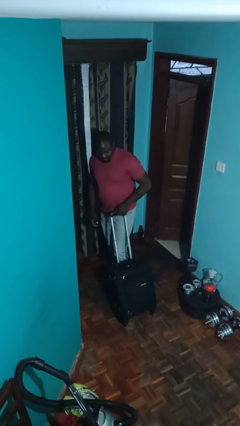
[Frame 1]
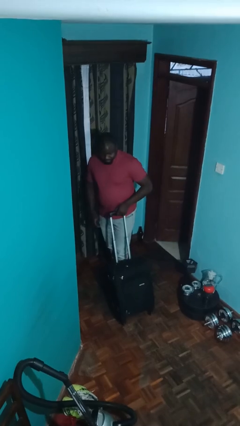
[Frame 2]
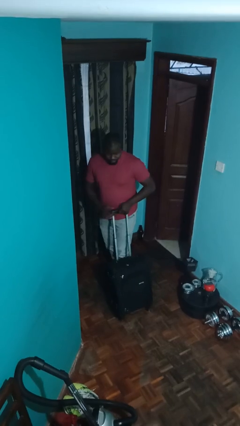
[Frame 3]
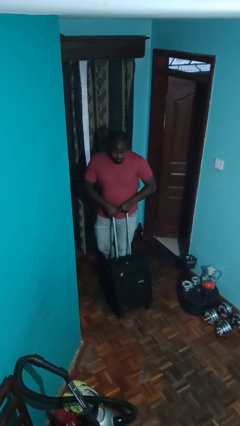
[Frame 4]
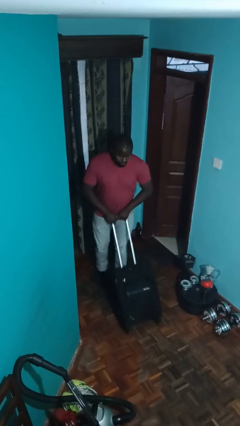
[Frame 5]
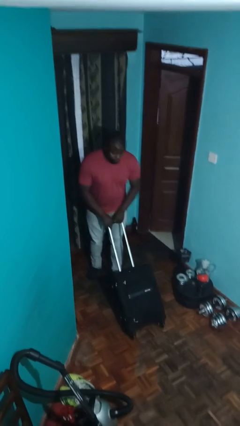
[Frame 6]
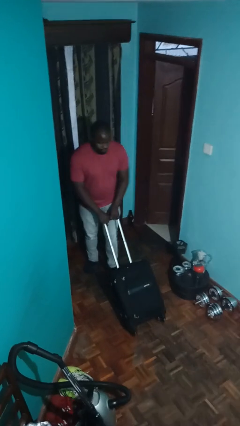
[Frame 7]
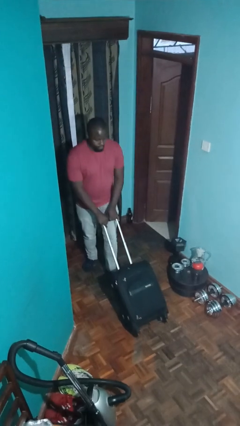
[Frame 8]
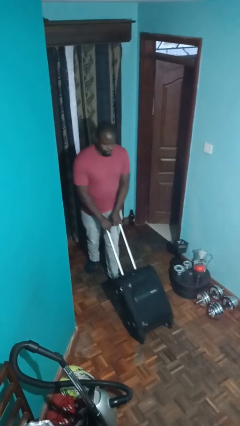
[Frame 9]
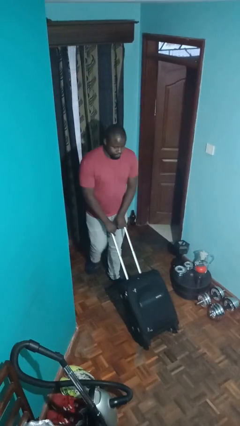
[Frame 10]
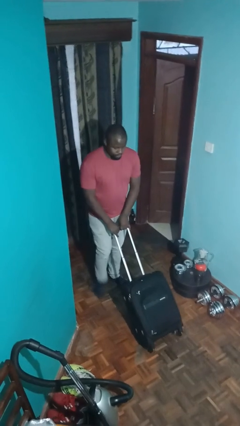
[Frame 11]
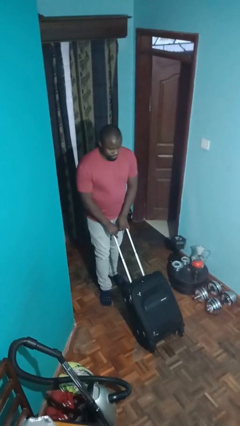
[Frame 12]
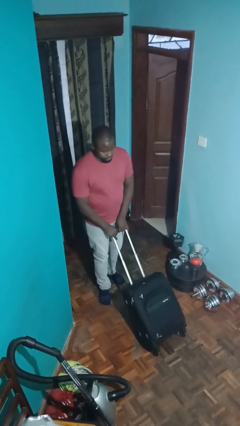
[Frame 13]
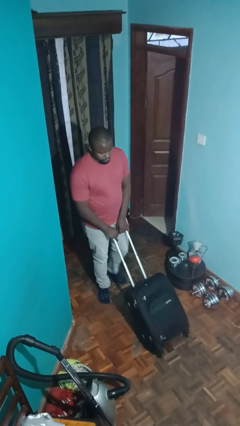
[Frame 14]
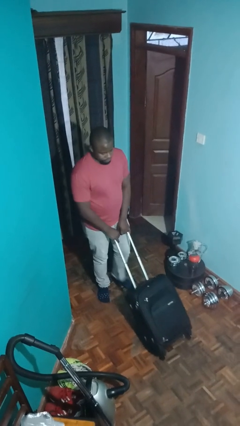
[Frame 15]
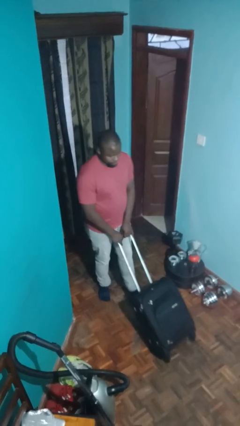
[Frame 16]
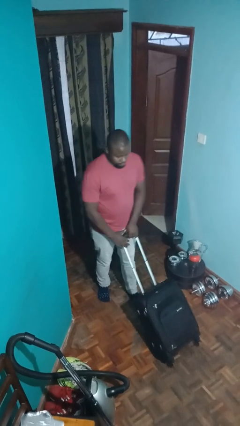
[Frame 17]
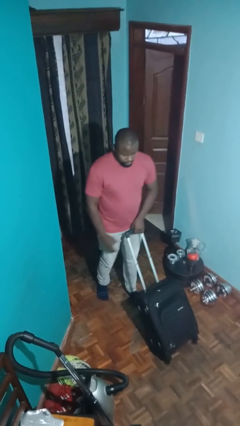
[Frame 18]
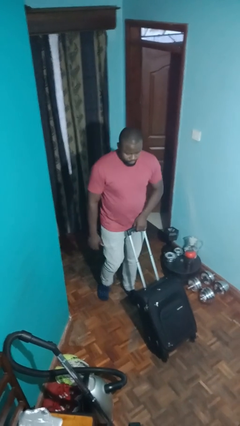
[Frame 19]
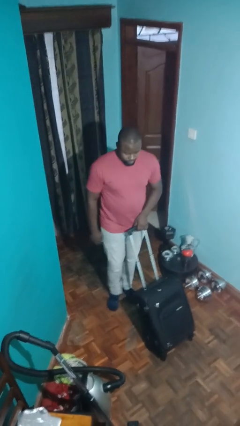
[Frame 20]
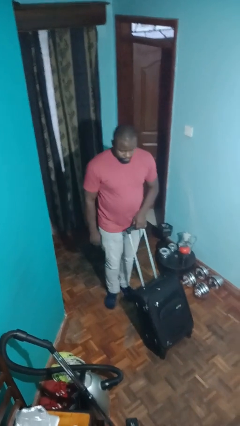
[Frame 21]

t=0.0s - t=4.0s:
person pushes wheeled cart

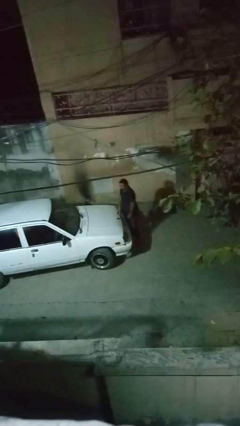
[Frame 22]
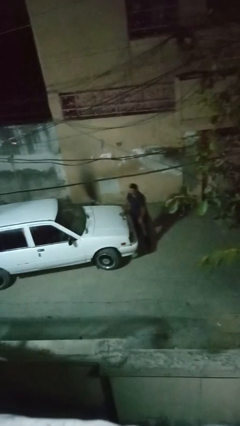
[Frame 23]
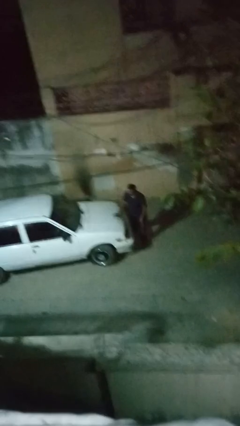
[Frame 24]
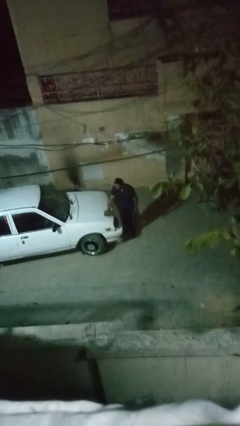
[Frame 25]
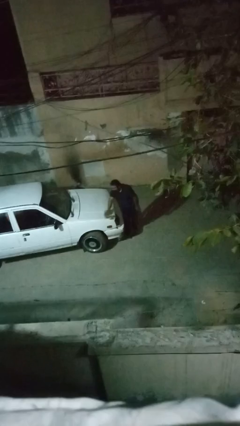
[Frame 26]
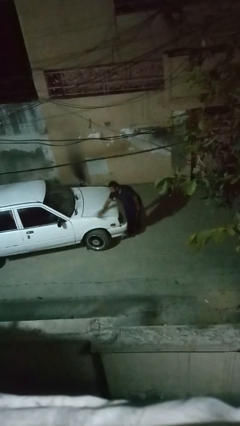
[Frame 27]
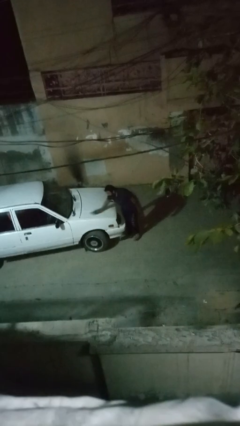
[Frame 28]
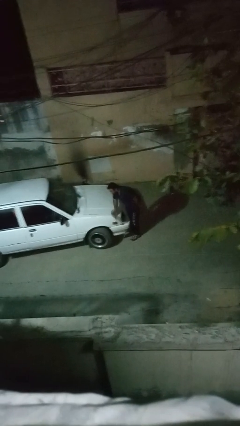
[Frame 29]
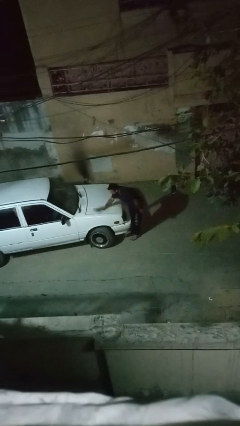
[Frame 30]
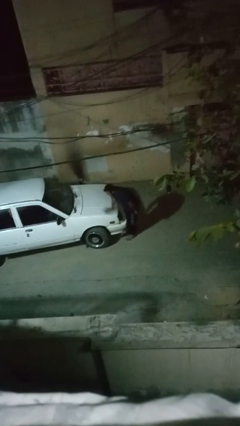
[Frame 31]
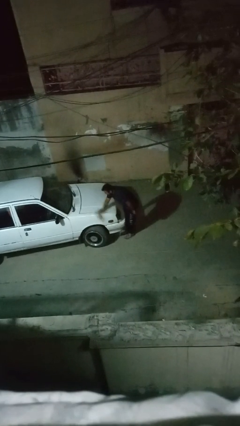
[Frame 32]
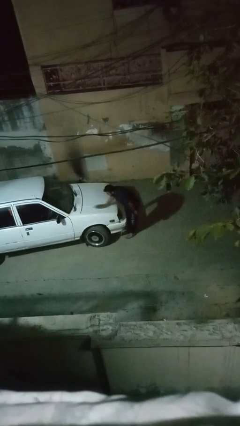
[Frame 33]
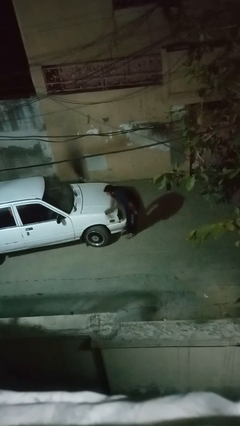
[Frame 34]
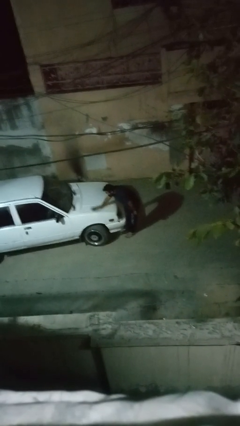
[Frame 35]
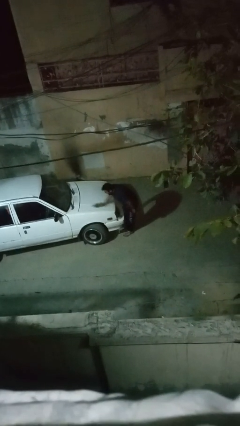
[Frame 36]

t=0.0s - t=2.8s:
person polishes car with rag

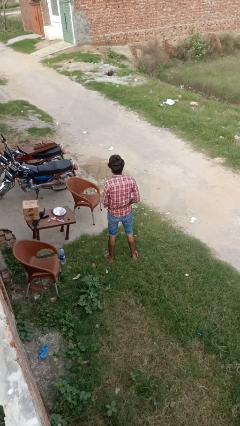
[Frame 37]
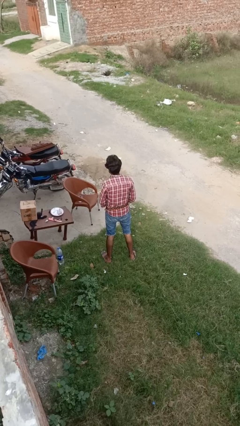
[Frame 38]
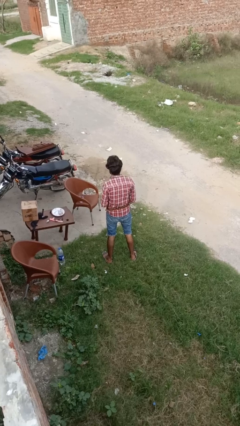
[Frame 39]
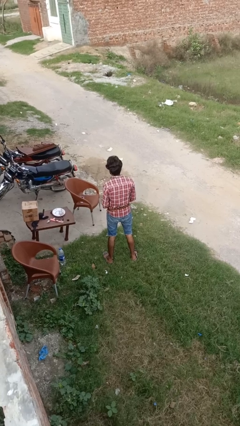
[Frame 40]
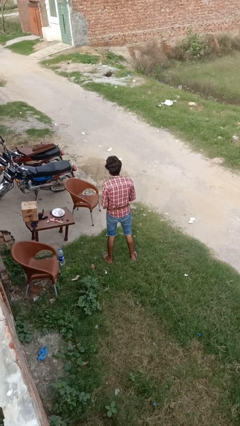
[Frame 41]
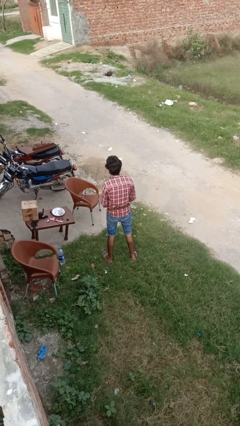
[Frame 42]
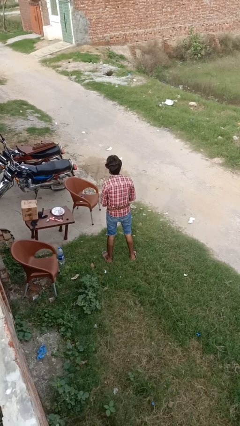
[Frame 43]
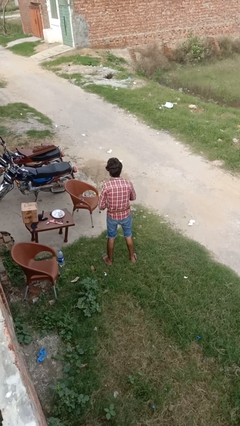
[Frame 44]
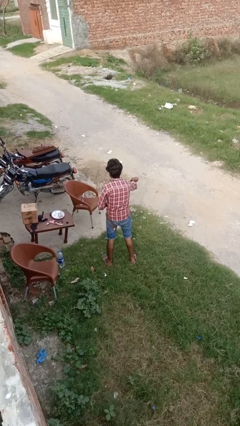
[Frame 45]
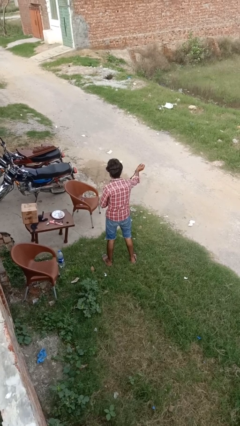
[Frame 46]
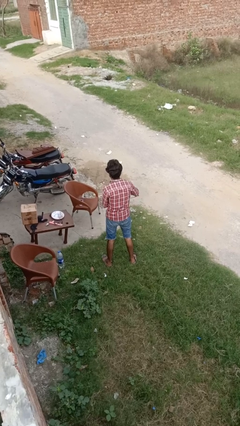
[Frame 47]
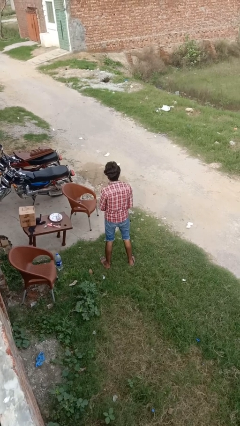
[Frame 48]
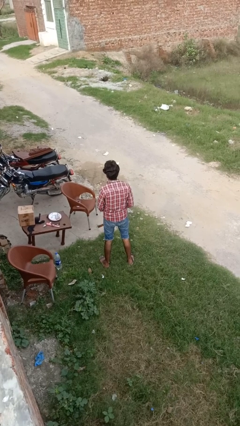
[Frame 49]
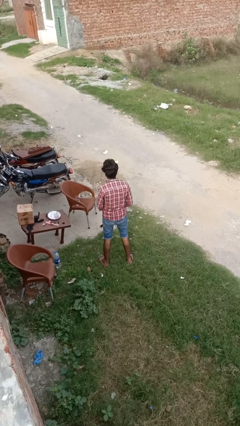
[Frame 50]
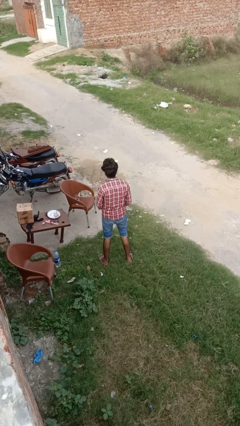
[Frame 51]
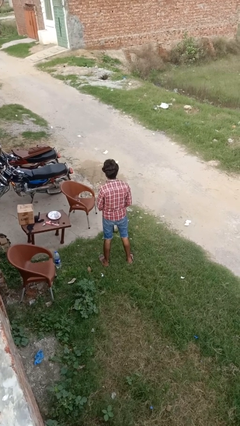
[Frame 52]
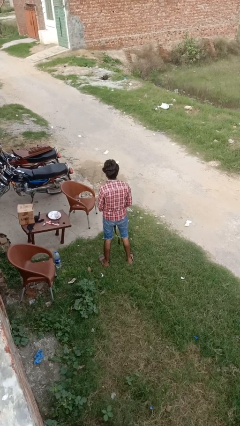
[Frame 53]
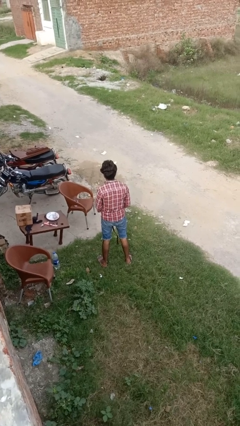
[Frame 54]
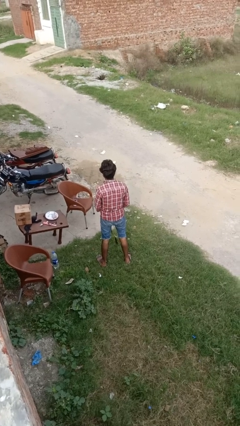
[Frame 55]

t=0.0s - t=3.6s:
person takes off belt

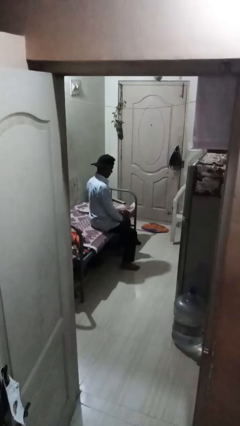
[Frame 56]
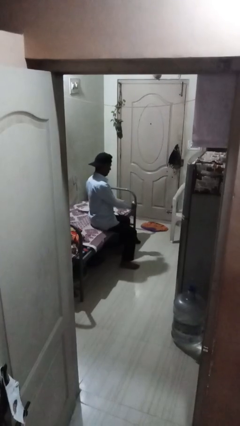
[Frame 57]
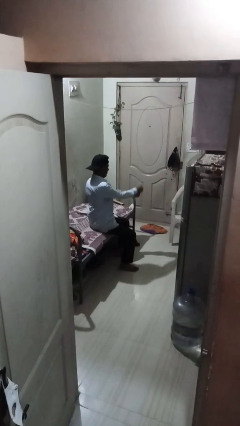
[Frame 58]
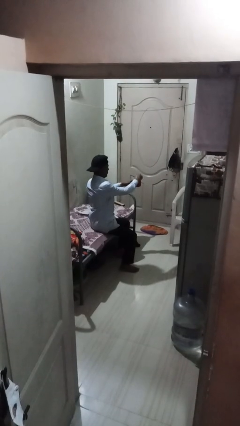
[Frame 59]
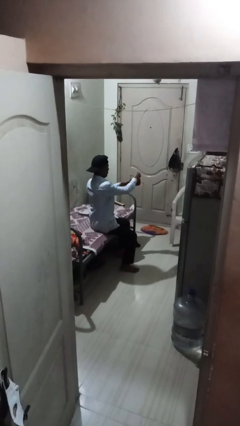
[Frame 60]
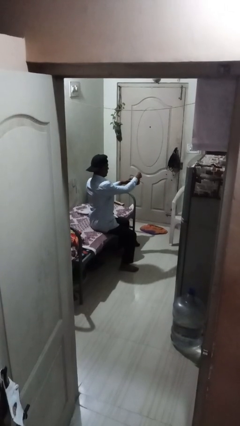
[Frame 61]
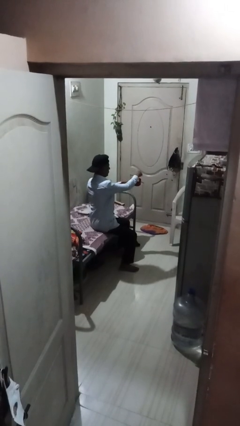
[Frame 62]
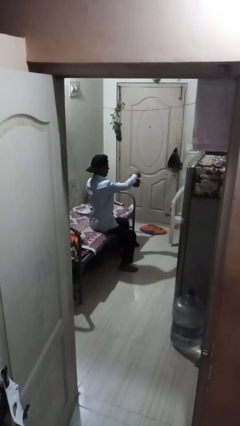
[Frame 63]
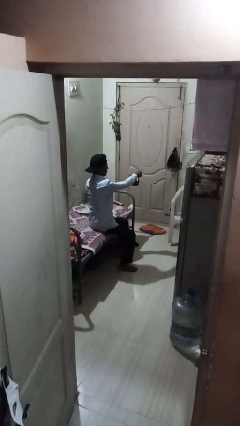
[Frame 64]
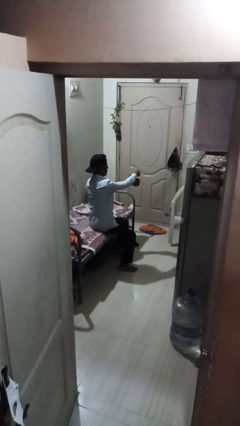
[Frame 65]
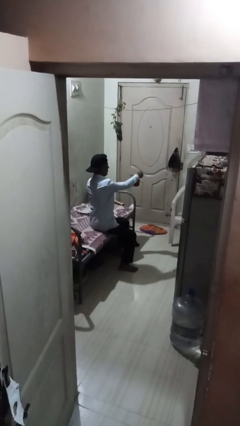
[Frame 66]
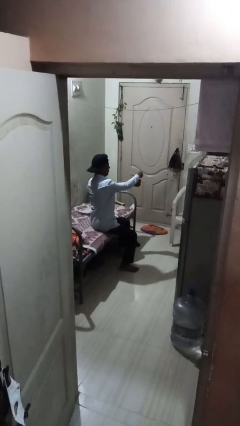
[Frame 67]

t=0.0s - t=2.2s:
person stirs mug

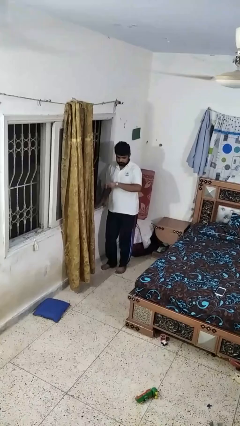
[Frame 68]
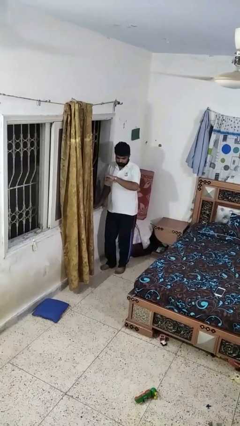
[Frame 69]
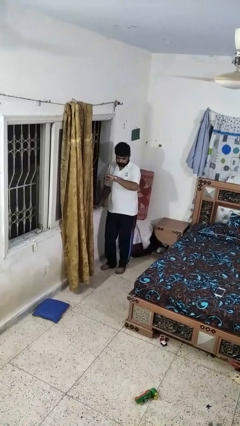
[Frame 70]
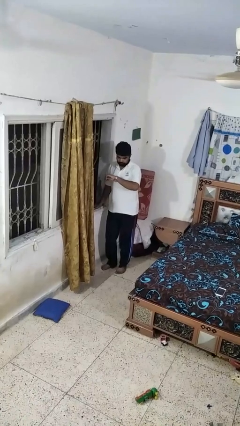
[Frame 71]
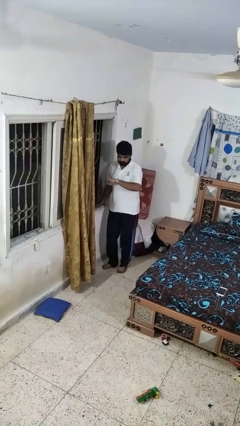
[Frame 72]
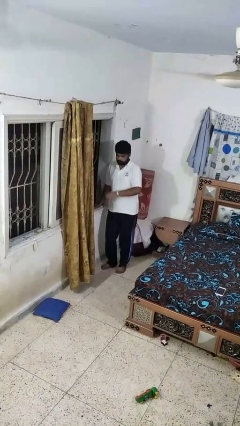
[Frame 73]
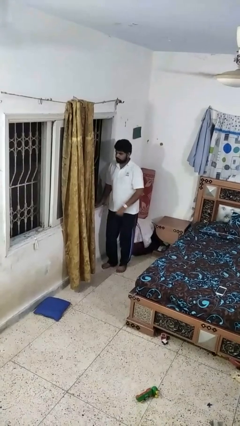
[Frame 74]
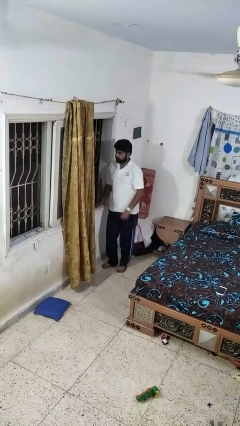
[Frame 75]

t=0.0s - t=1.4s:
person looks at wristwatch

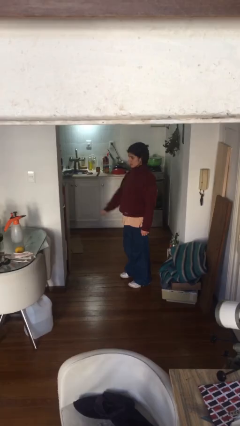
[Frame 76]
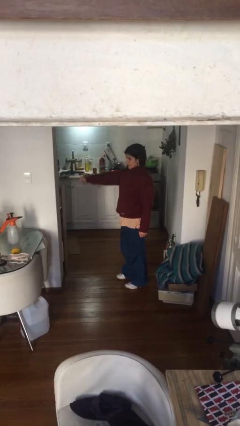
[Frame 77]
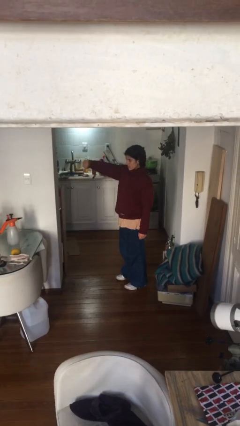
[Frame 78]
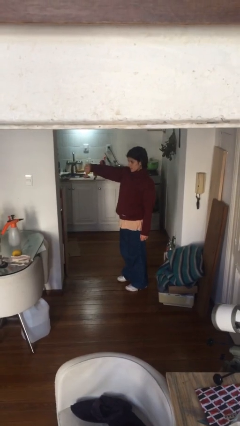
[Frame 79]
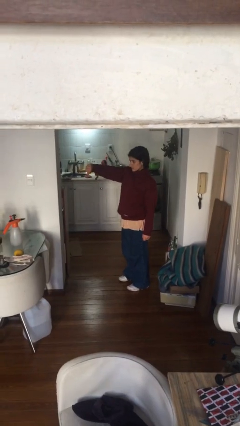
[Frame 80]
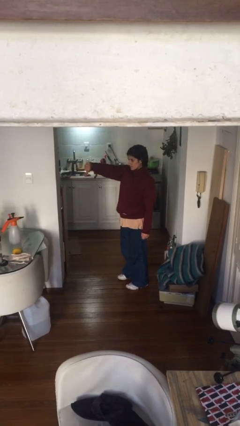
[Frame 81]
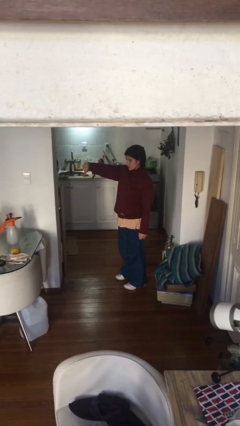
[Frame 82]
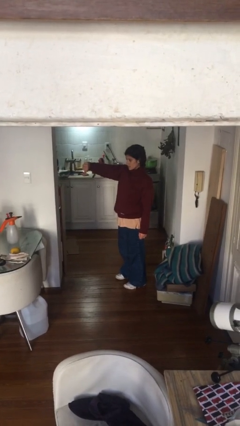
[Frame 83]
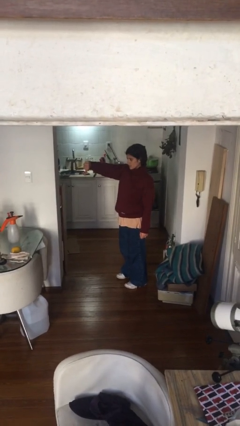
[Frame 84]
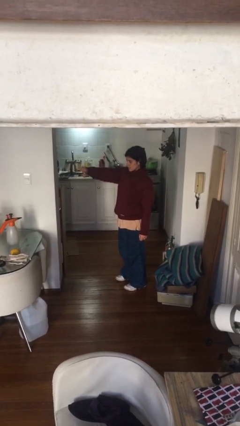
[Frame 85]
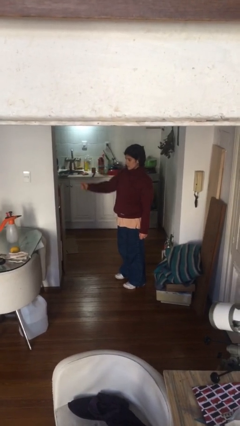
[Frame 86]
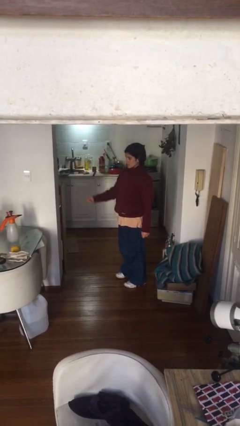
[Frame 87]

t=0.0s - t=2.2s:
person gestures thumbs down

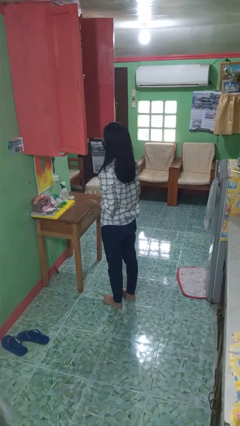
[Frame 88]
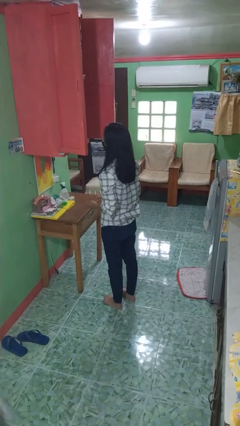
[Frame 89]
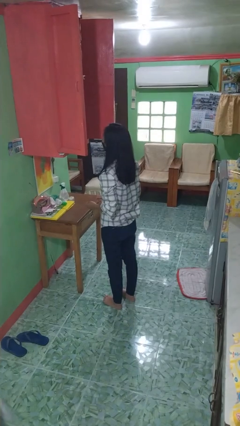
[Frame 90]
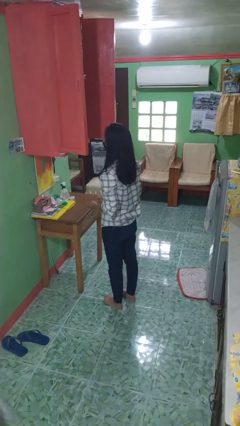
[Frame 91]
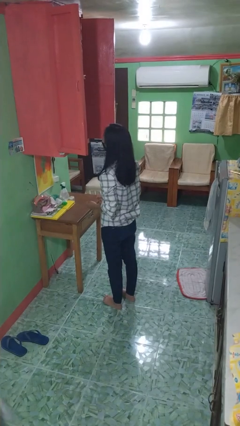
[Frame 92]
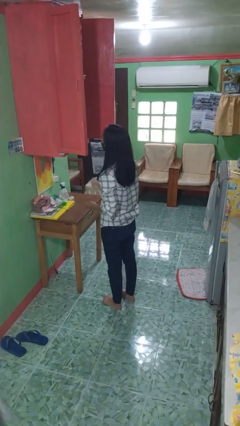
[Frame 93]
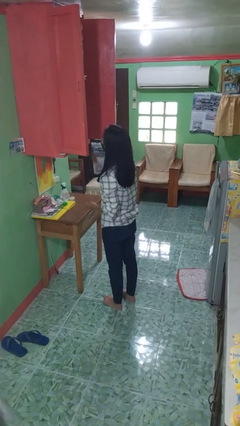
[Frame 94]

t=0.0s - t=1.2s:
person picks up object from cabinet
